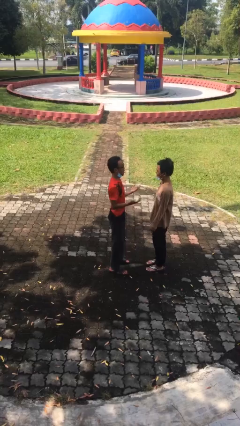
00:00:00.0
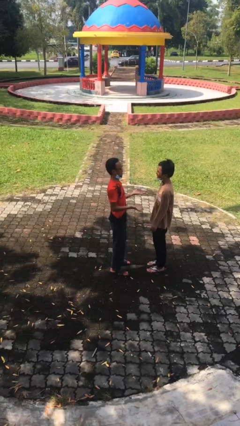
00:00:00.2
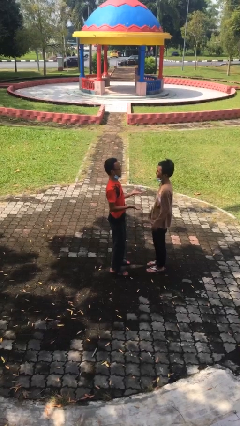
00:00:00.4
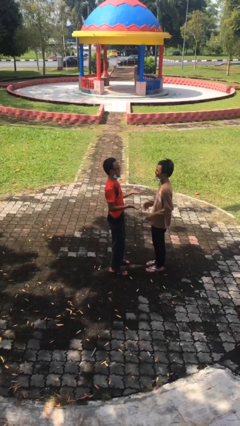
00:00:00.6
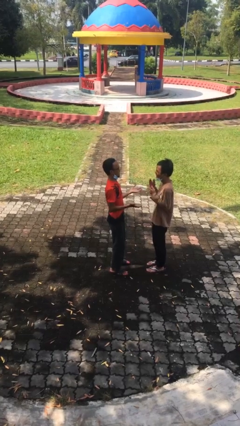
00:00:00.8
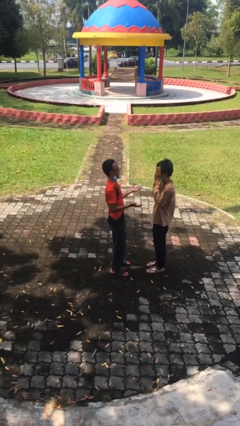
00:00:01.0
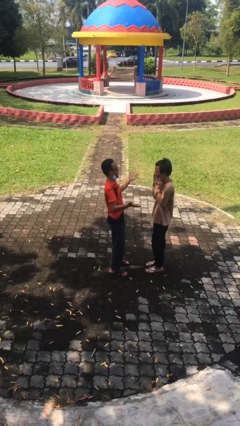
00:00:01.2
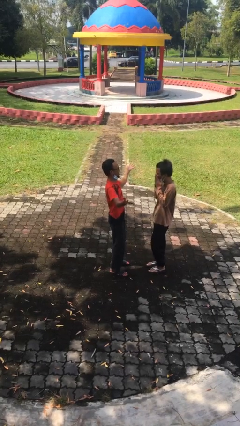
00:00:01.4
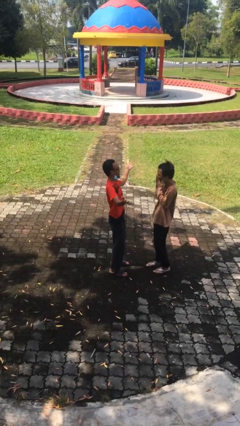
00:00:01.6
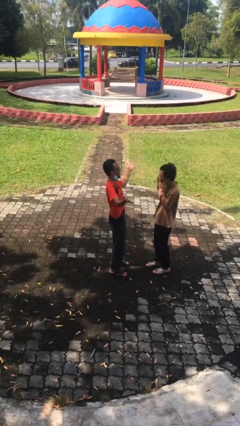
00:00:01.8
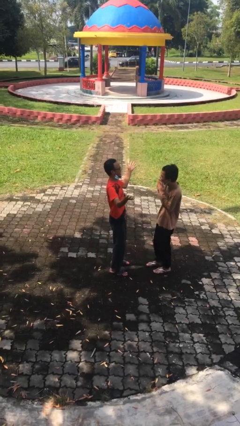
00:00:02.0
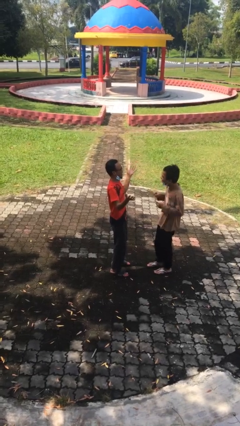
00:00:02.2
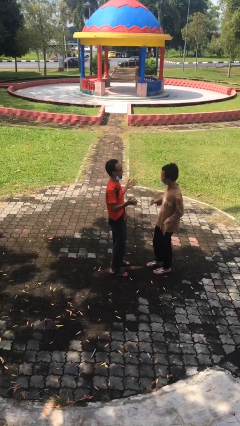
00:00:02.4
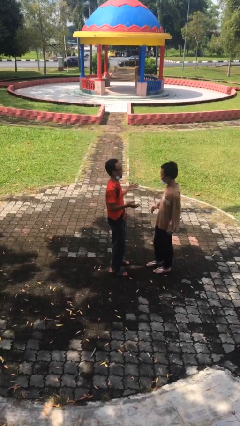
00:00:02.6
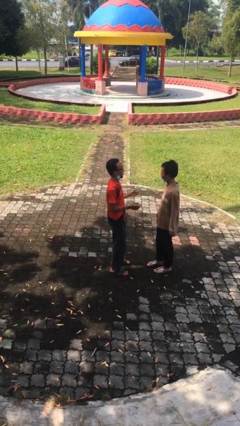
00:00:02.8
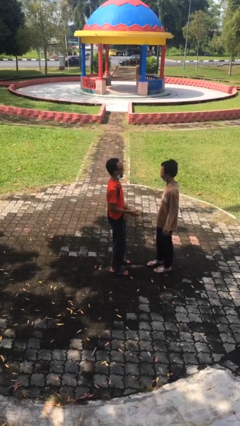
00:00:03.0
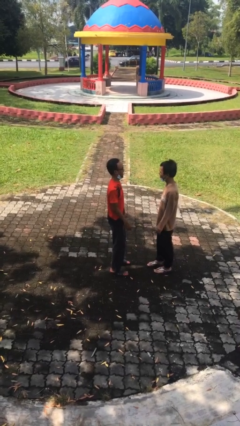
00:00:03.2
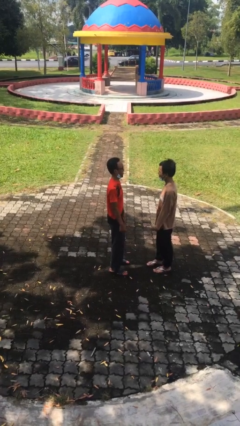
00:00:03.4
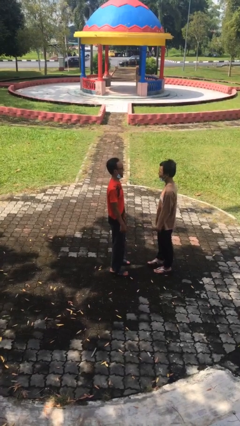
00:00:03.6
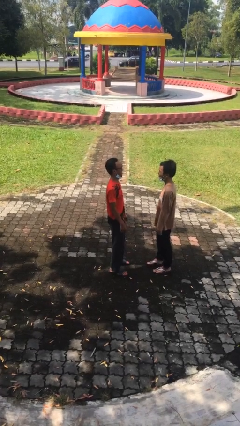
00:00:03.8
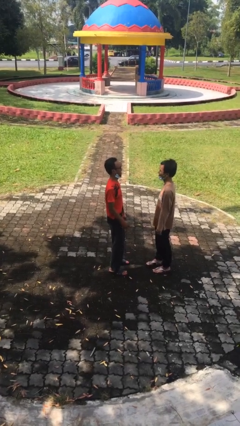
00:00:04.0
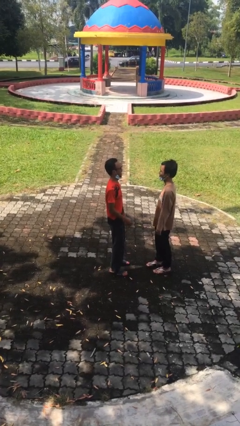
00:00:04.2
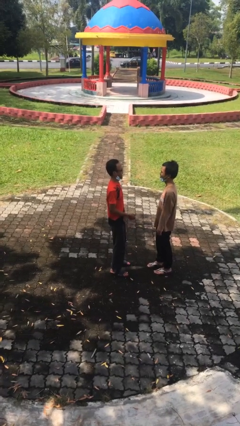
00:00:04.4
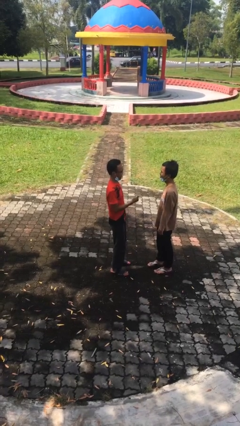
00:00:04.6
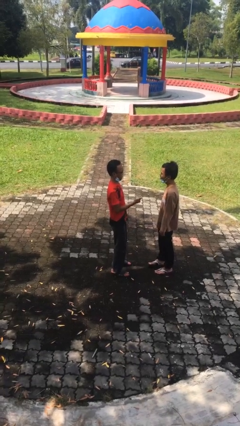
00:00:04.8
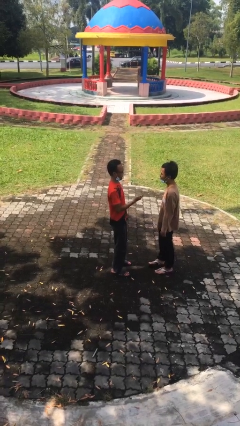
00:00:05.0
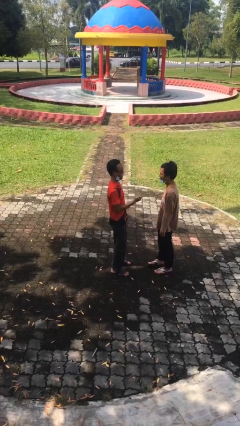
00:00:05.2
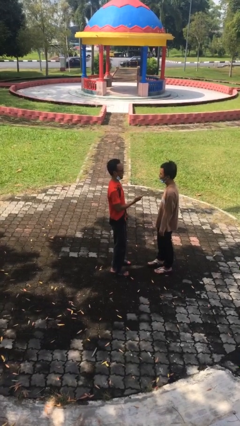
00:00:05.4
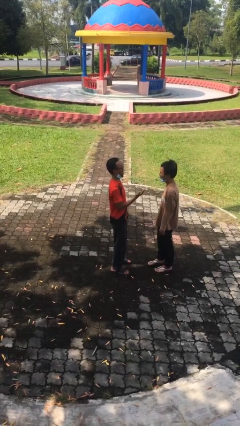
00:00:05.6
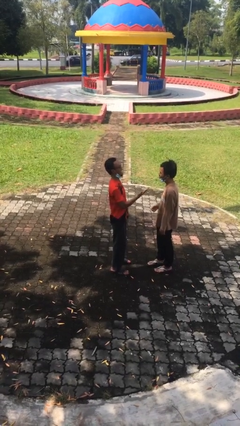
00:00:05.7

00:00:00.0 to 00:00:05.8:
person talks to person

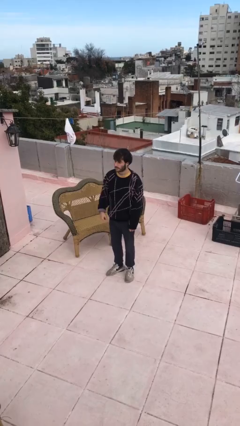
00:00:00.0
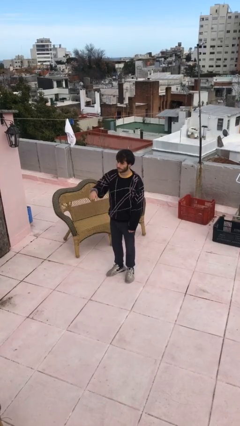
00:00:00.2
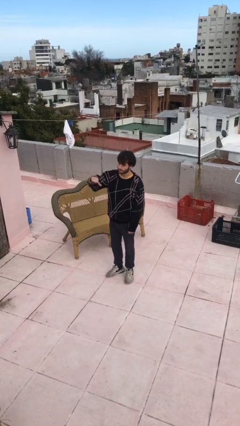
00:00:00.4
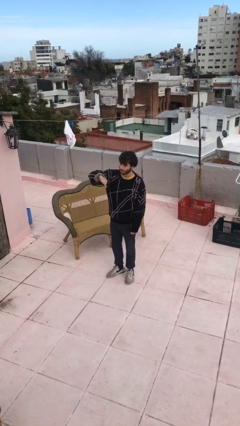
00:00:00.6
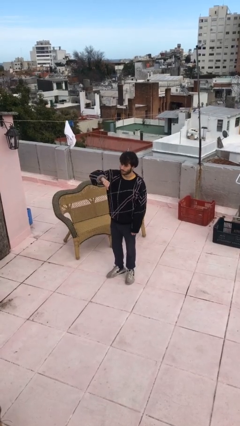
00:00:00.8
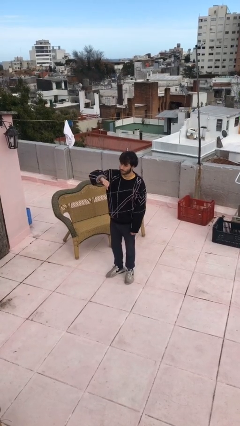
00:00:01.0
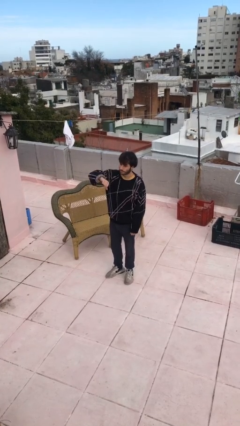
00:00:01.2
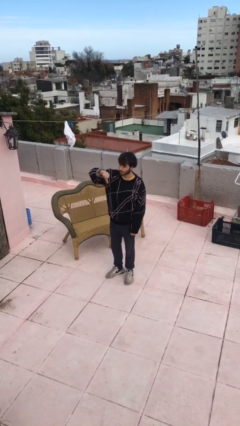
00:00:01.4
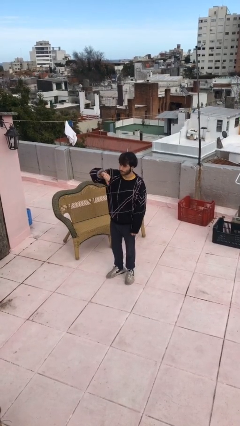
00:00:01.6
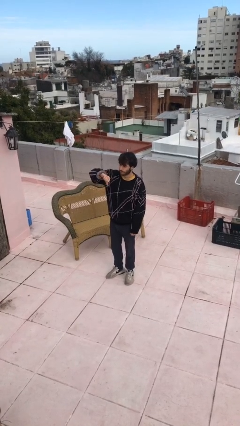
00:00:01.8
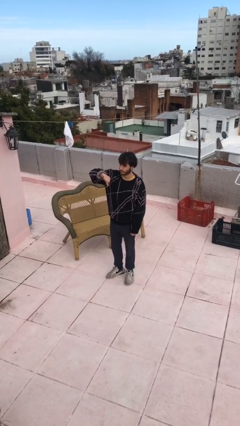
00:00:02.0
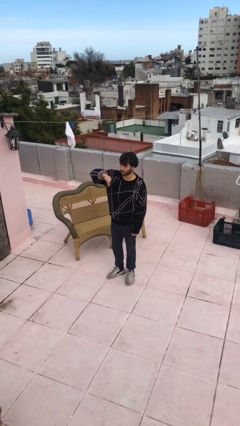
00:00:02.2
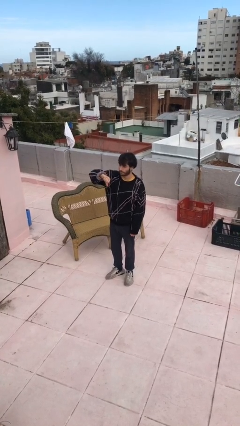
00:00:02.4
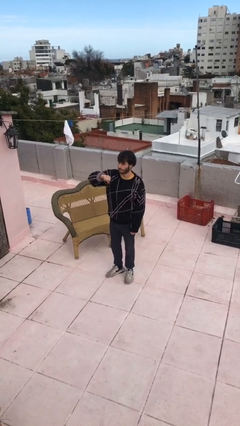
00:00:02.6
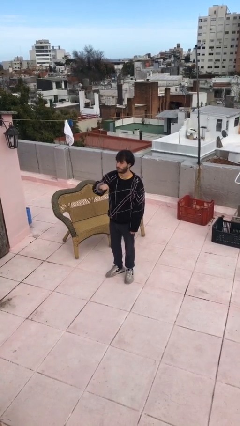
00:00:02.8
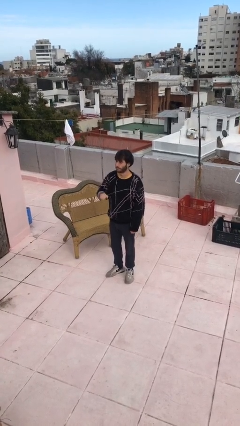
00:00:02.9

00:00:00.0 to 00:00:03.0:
person gestures thumbs down

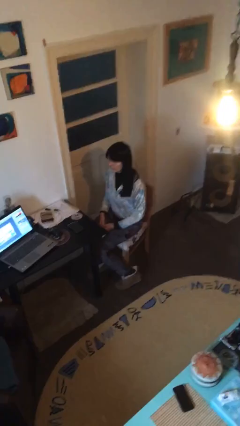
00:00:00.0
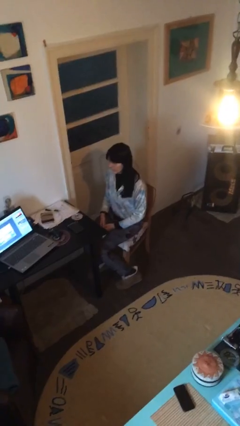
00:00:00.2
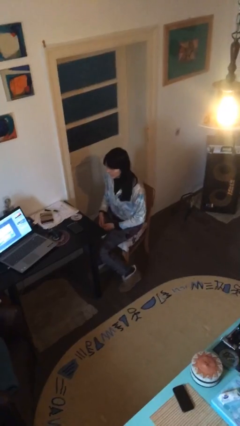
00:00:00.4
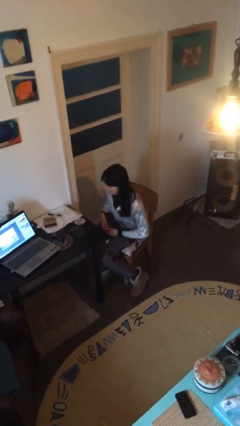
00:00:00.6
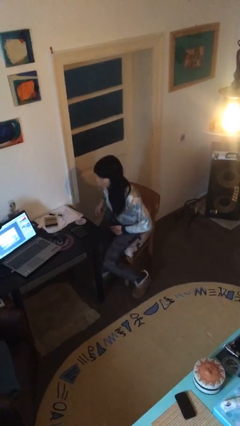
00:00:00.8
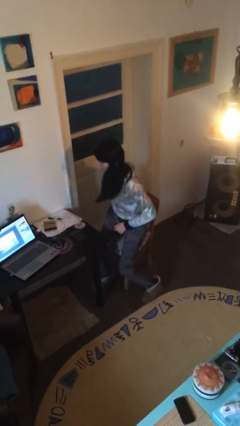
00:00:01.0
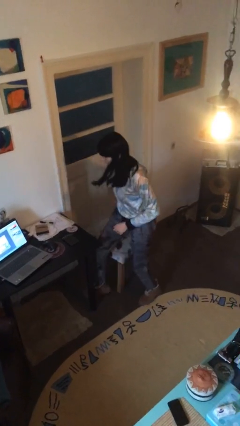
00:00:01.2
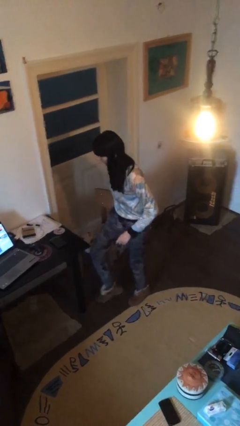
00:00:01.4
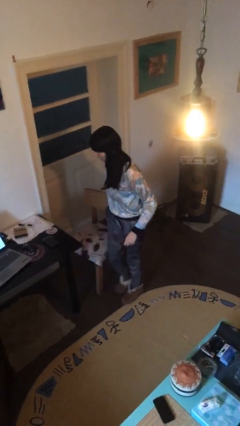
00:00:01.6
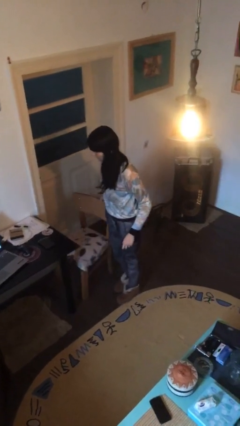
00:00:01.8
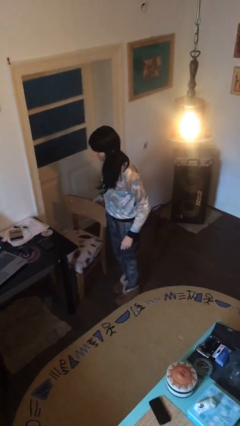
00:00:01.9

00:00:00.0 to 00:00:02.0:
person stands up

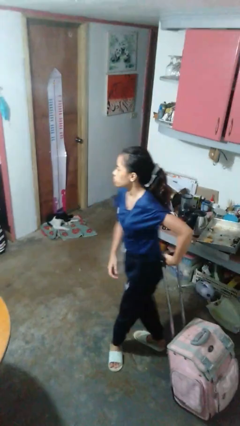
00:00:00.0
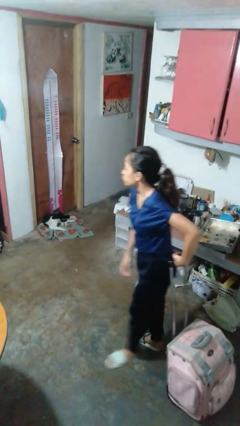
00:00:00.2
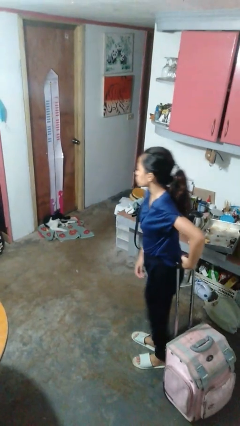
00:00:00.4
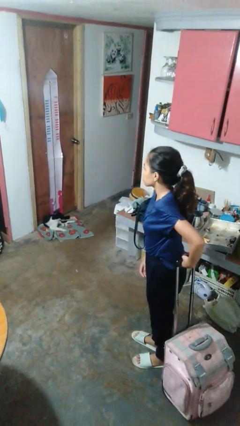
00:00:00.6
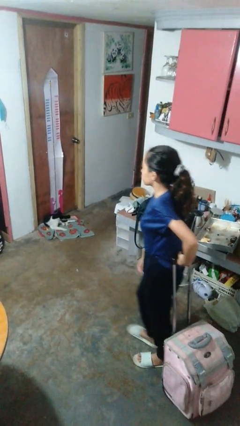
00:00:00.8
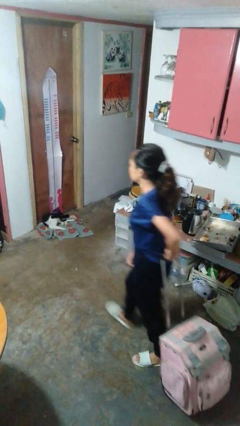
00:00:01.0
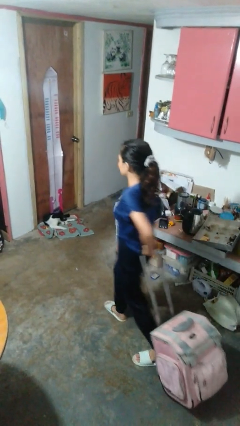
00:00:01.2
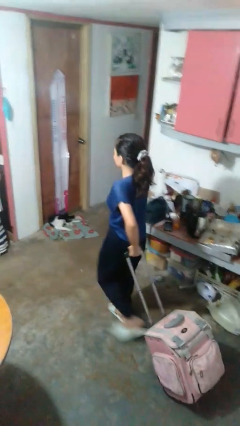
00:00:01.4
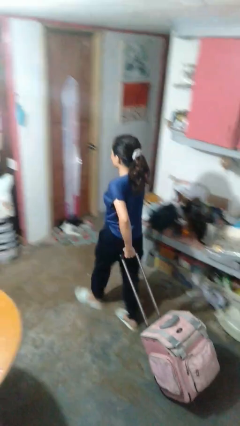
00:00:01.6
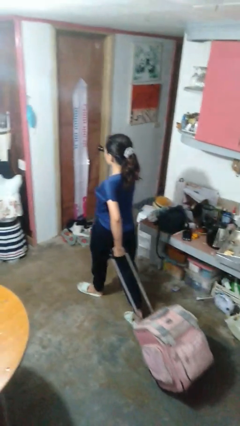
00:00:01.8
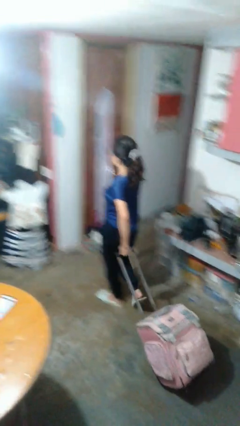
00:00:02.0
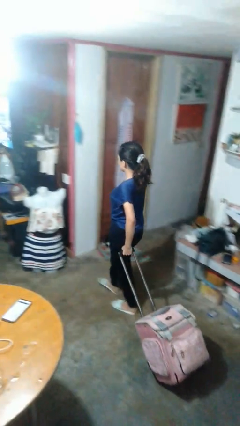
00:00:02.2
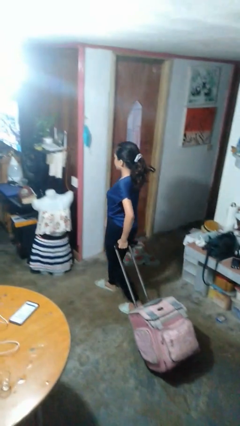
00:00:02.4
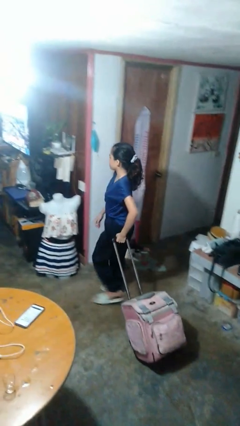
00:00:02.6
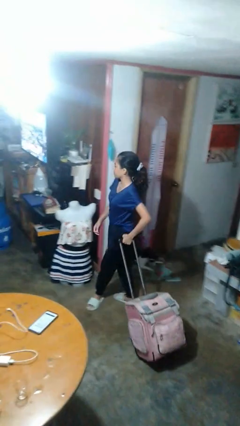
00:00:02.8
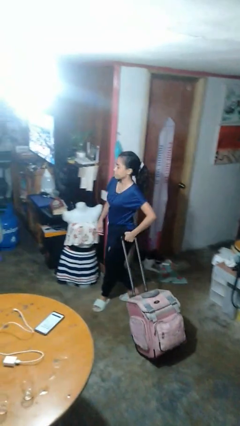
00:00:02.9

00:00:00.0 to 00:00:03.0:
person pulls wheeled cart

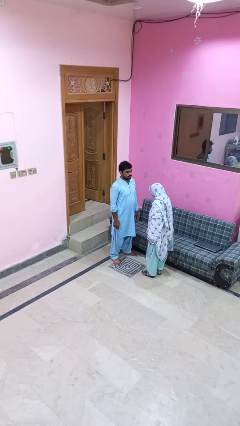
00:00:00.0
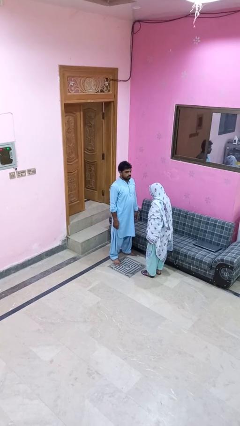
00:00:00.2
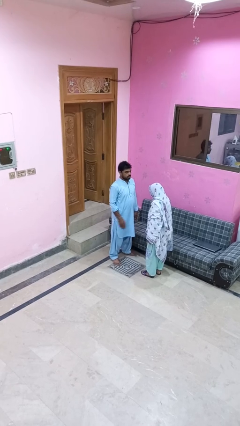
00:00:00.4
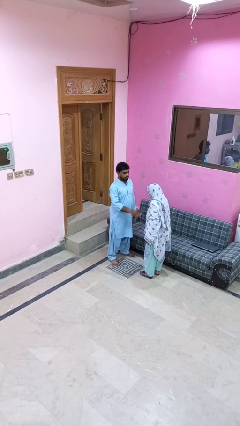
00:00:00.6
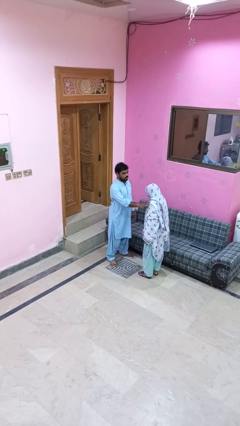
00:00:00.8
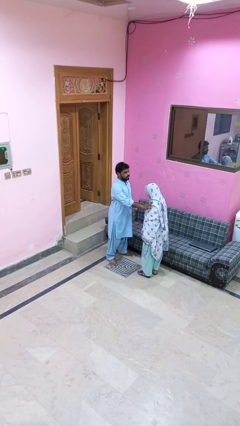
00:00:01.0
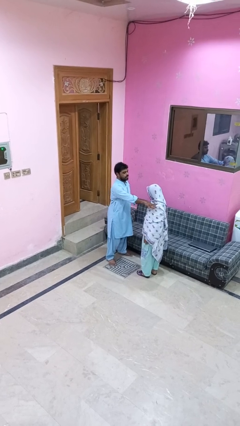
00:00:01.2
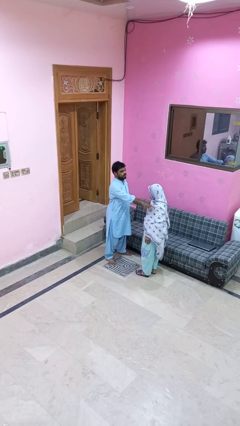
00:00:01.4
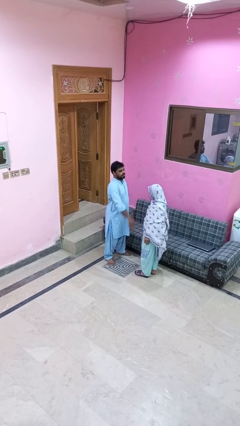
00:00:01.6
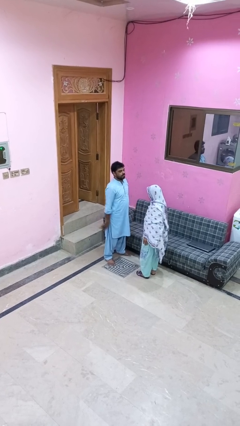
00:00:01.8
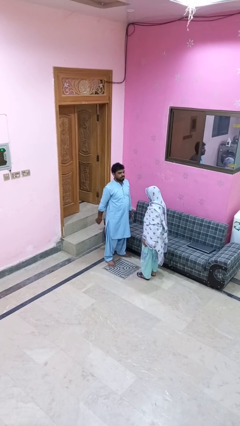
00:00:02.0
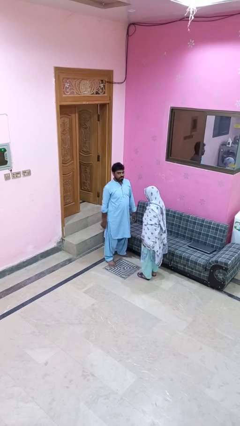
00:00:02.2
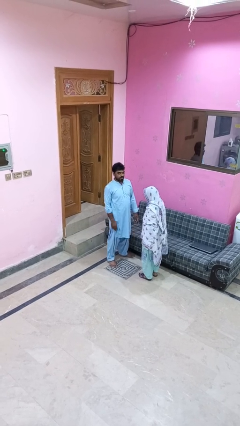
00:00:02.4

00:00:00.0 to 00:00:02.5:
person shoves person

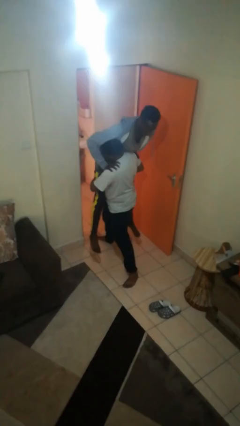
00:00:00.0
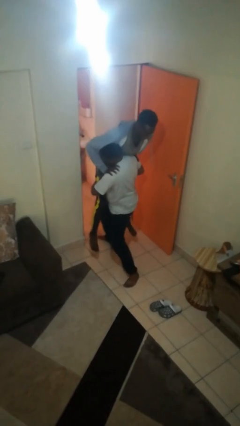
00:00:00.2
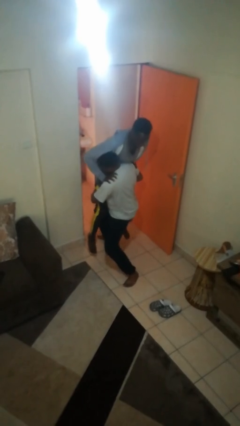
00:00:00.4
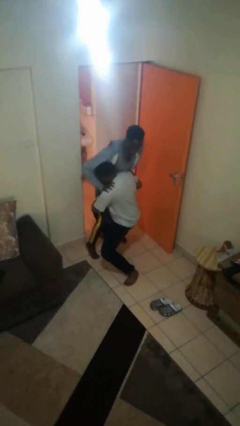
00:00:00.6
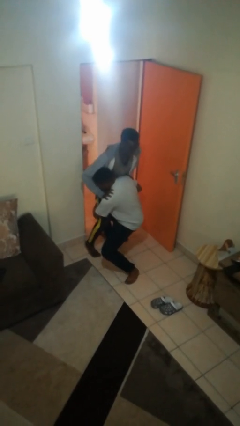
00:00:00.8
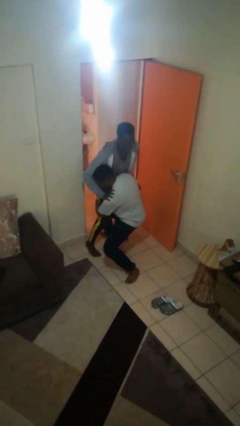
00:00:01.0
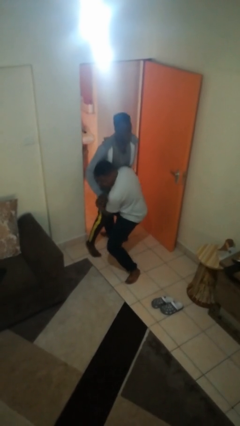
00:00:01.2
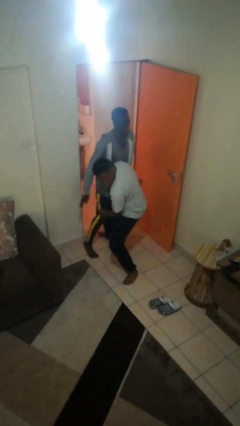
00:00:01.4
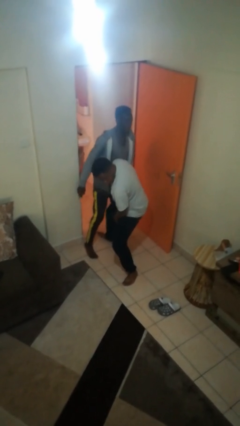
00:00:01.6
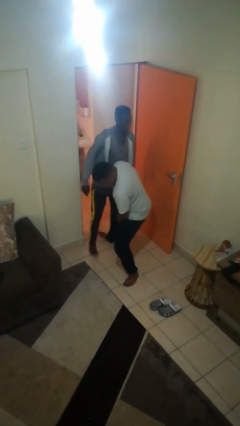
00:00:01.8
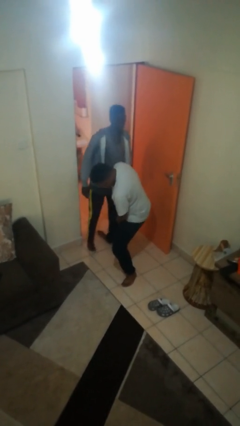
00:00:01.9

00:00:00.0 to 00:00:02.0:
person puts down person
